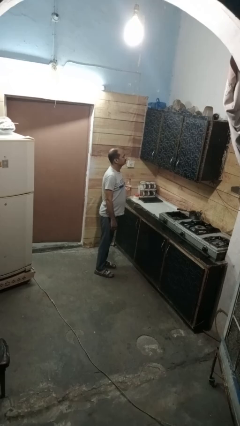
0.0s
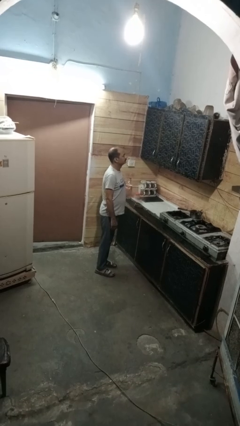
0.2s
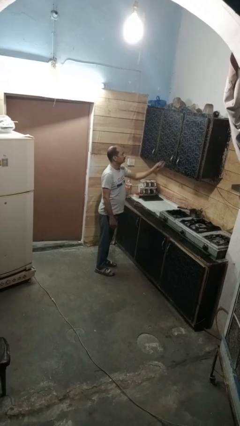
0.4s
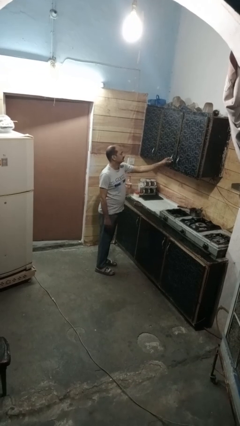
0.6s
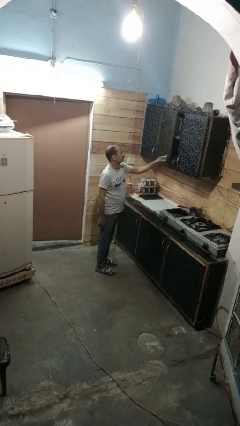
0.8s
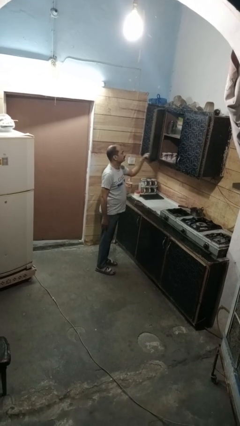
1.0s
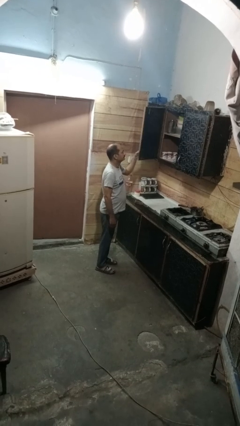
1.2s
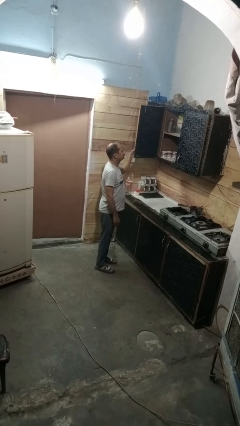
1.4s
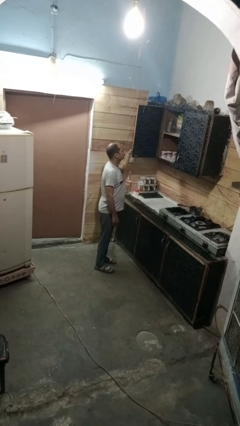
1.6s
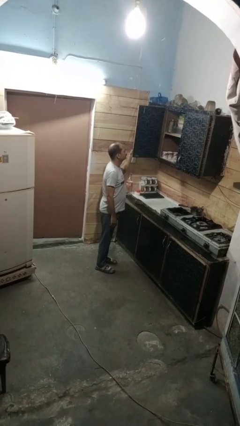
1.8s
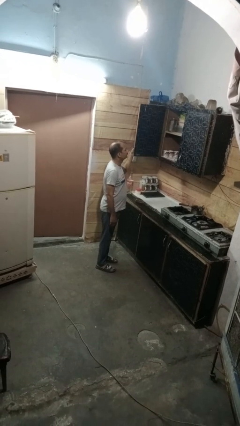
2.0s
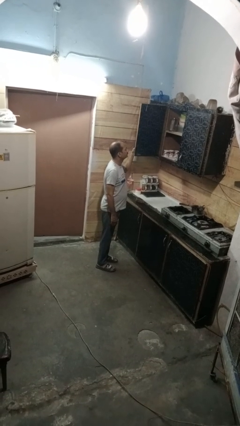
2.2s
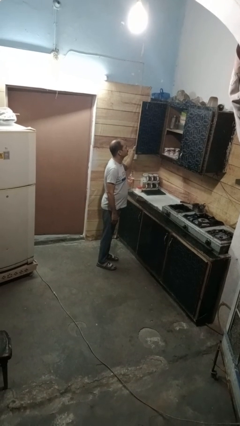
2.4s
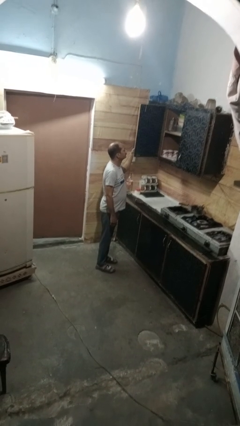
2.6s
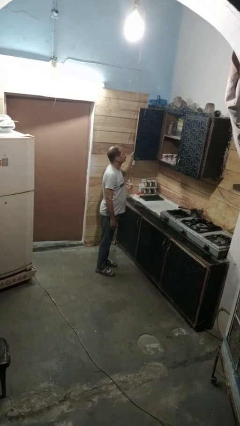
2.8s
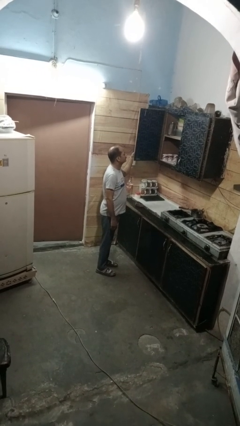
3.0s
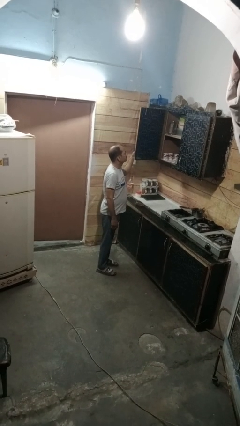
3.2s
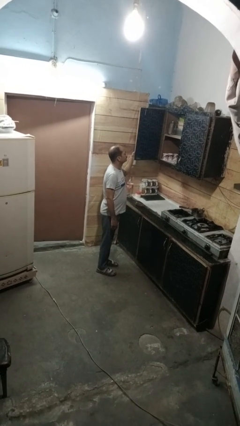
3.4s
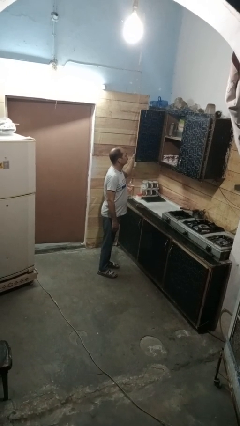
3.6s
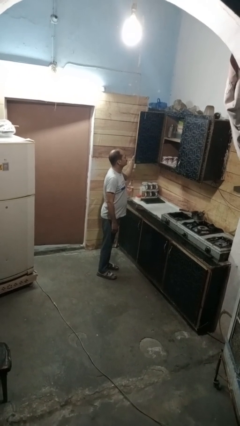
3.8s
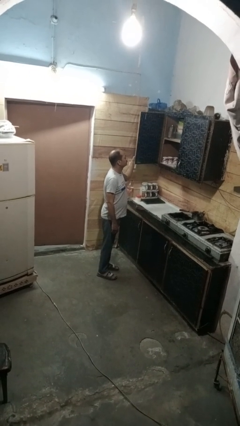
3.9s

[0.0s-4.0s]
person opens cabinet

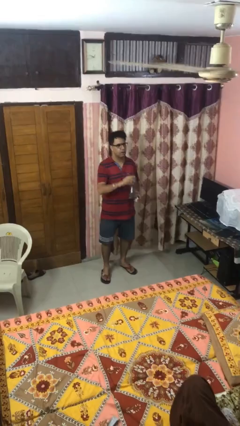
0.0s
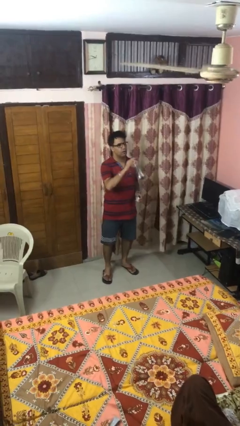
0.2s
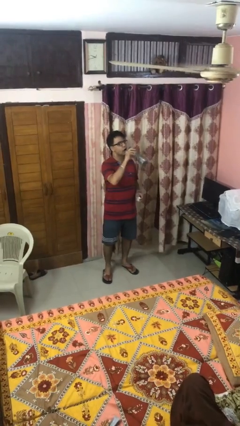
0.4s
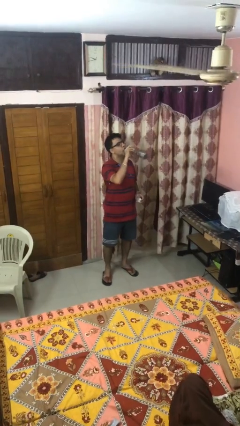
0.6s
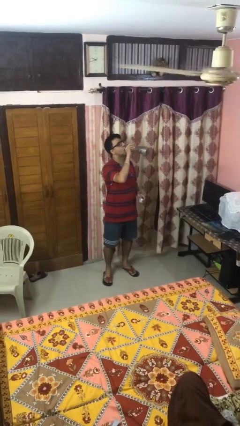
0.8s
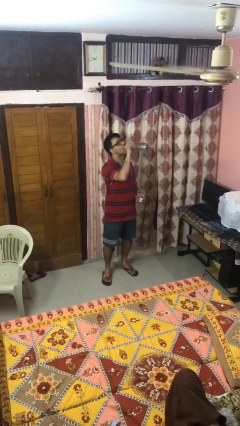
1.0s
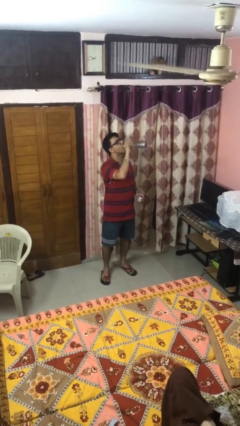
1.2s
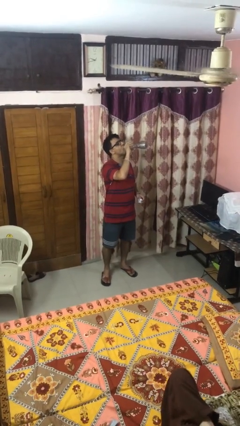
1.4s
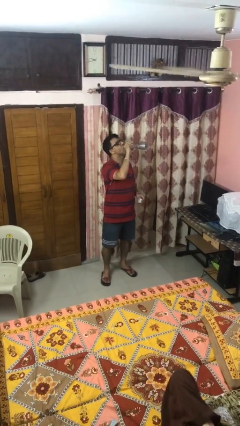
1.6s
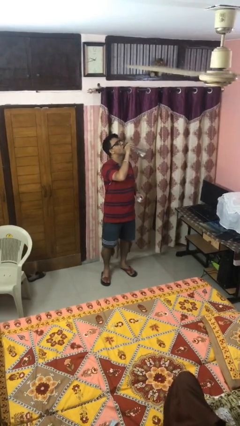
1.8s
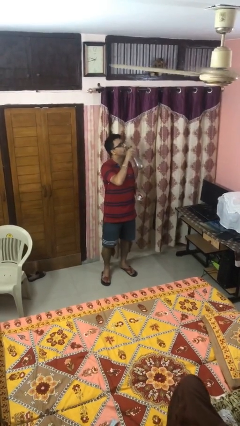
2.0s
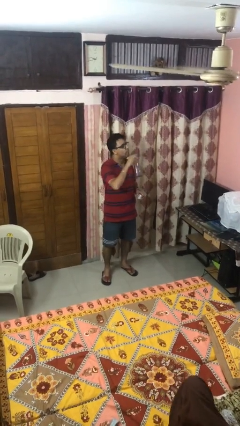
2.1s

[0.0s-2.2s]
person drinks from bottle

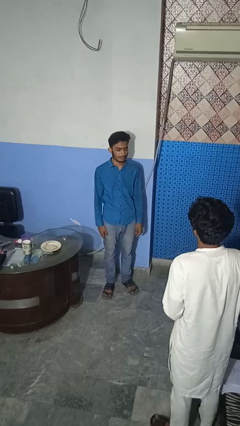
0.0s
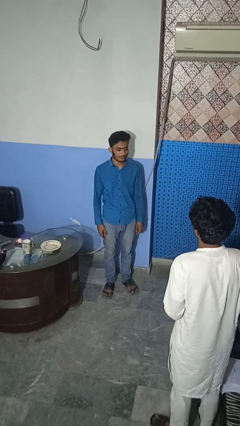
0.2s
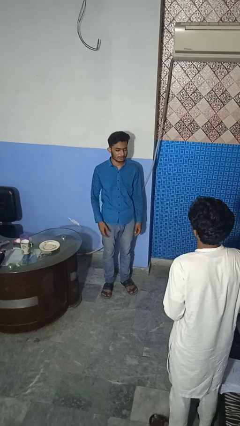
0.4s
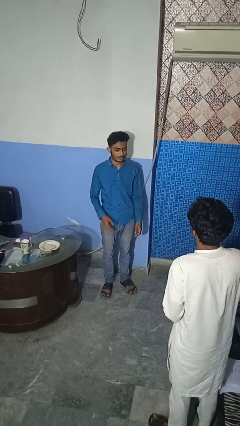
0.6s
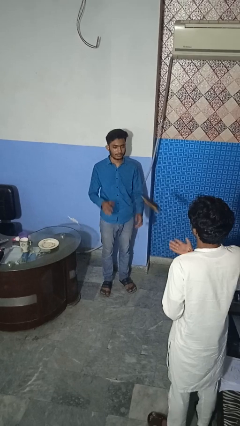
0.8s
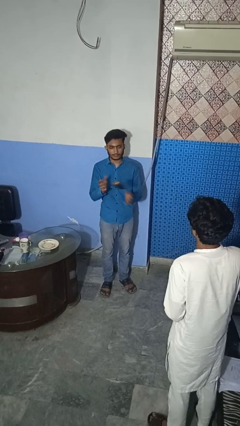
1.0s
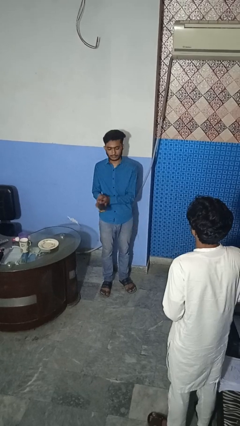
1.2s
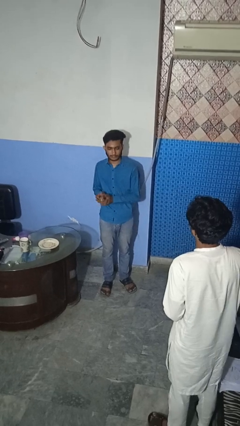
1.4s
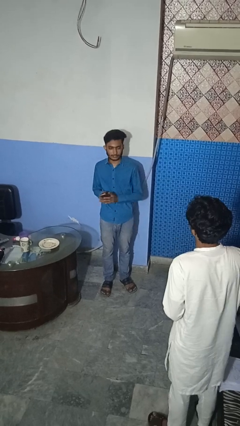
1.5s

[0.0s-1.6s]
person catches object from person

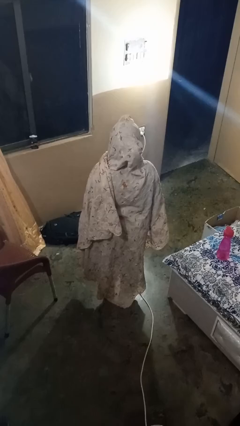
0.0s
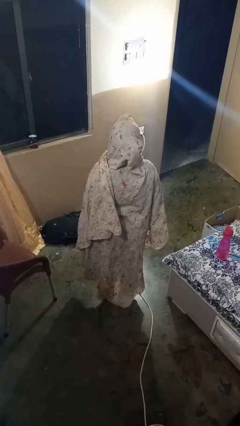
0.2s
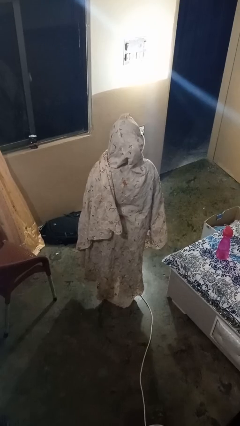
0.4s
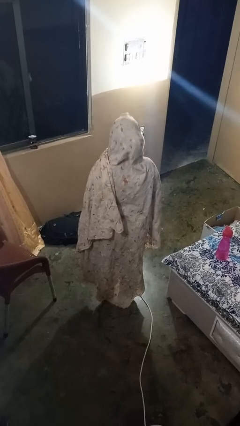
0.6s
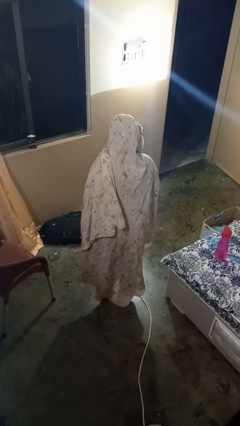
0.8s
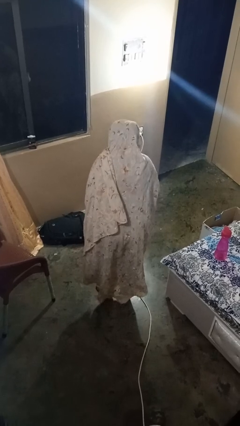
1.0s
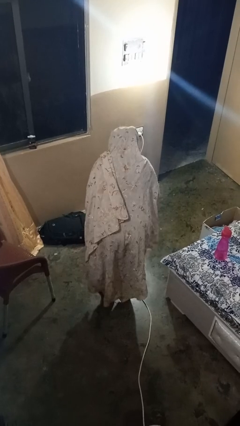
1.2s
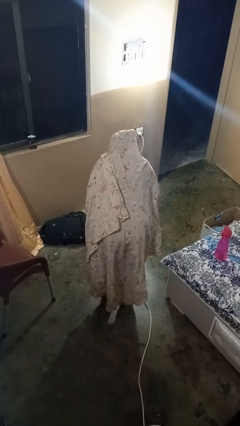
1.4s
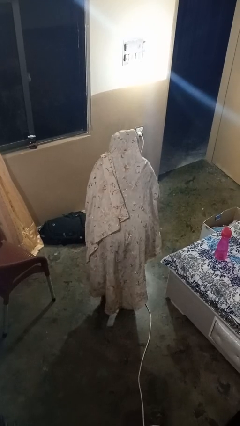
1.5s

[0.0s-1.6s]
person bows

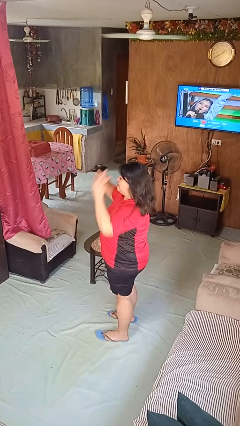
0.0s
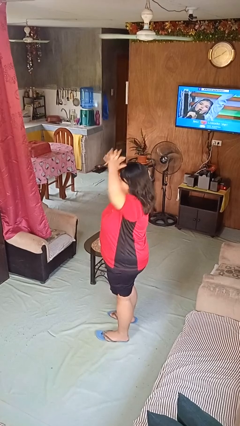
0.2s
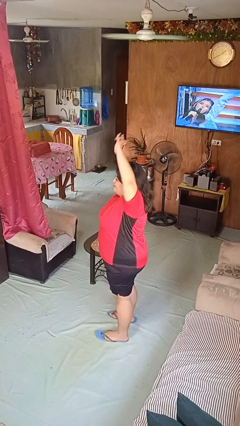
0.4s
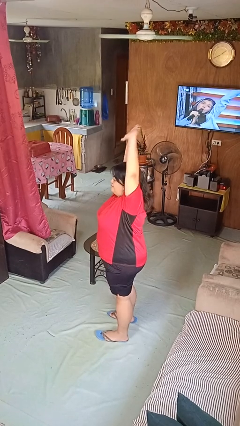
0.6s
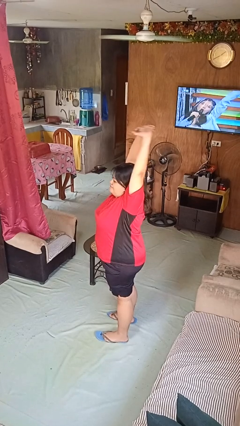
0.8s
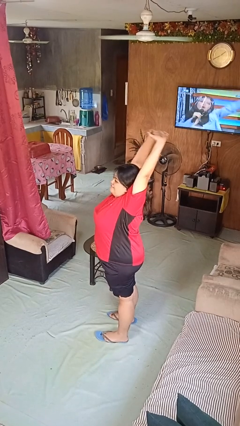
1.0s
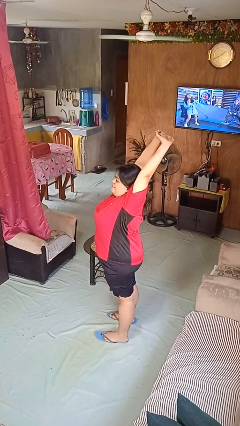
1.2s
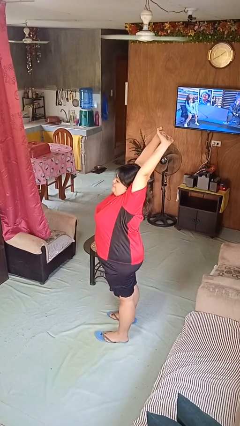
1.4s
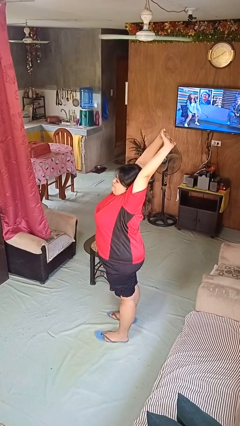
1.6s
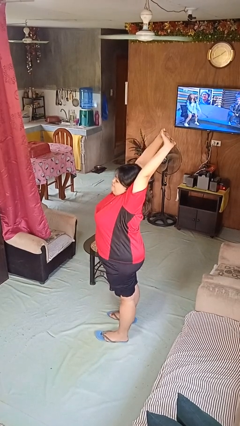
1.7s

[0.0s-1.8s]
person stretches arms over head

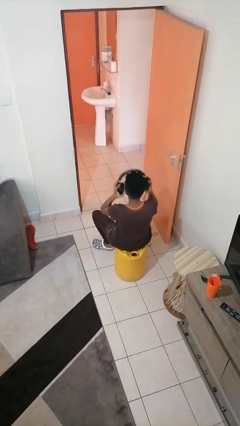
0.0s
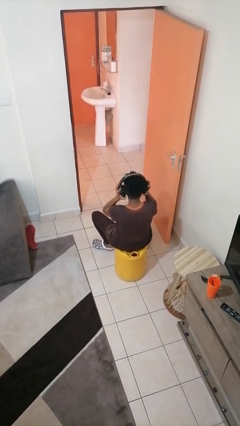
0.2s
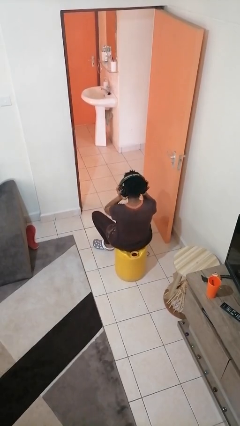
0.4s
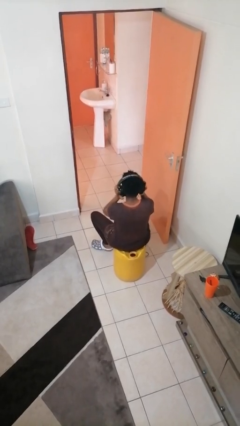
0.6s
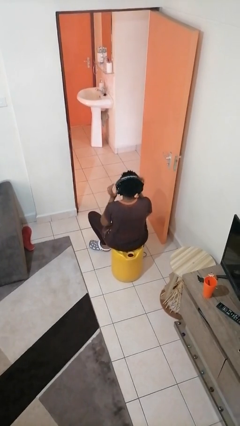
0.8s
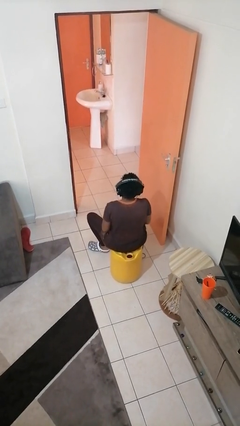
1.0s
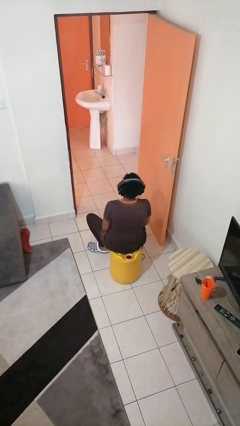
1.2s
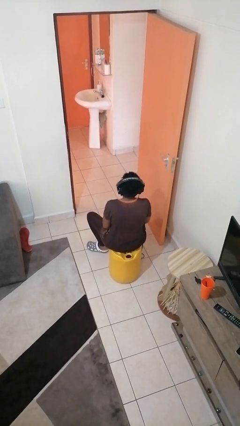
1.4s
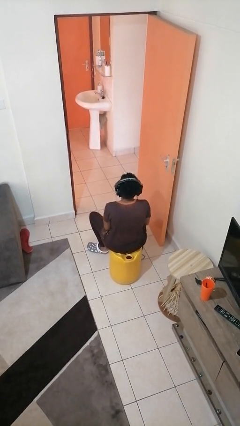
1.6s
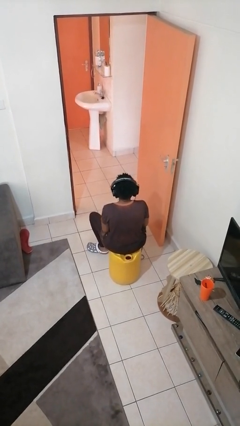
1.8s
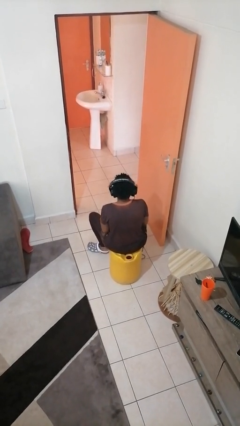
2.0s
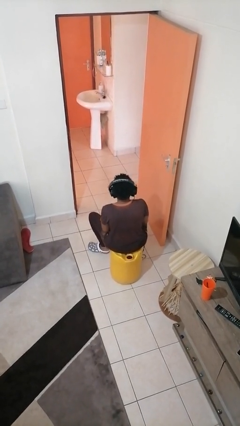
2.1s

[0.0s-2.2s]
person puts on headphones

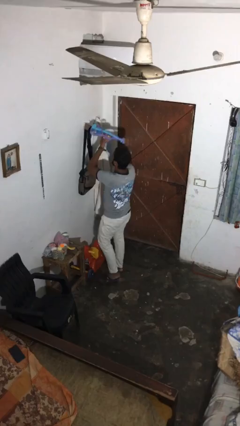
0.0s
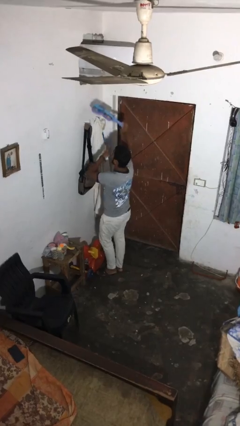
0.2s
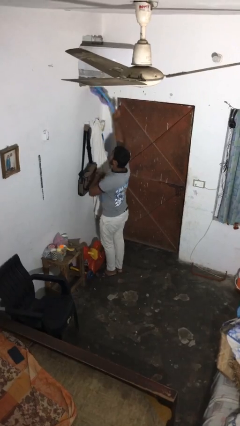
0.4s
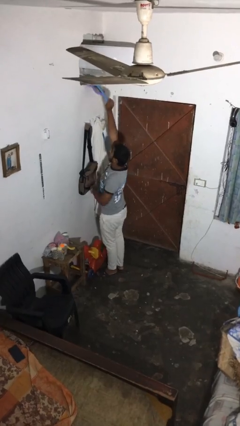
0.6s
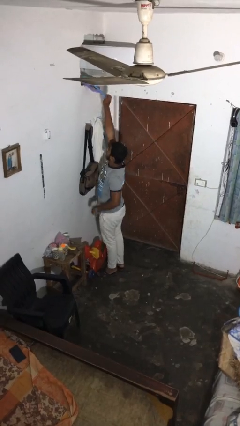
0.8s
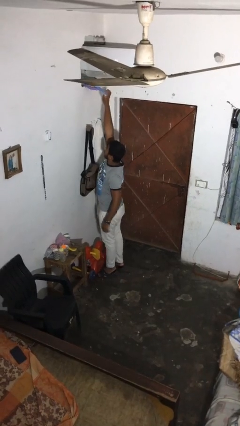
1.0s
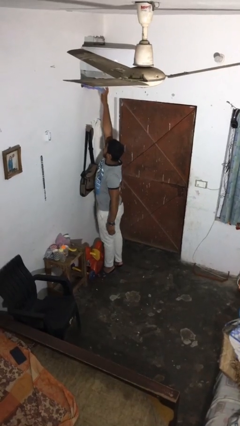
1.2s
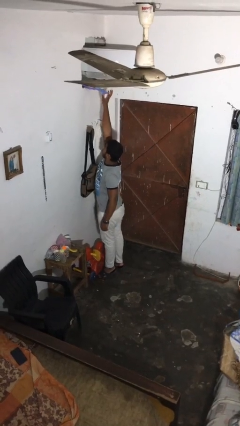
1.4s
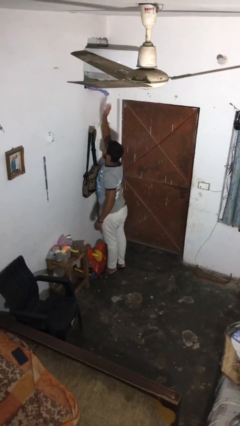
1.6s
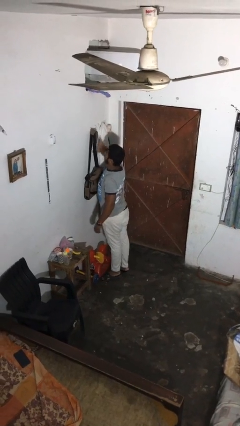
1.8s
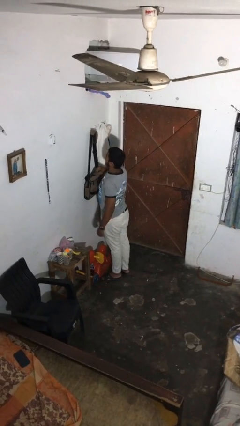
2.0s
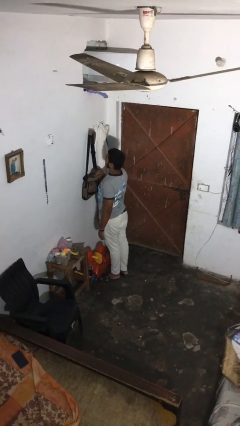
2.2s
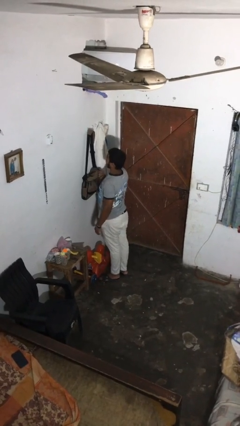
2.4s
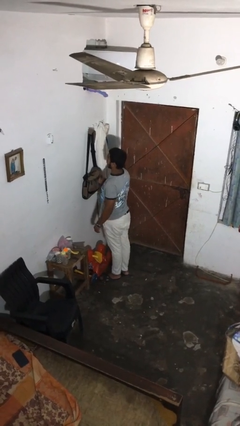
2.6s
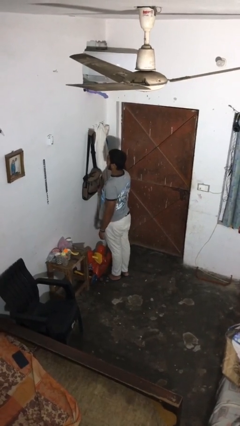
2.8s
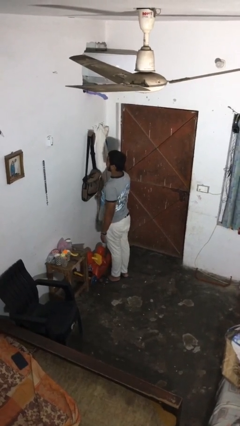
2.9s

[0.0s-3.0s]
person puts down object on shelf

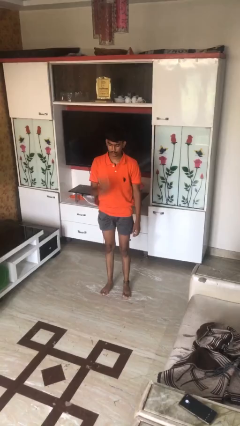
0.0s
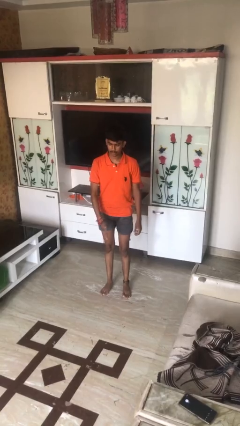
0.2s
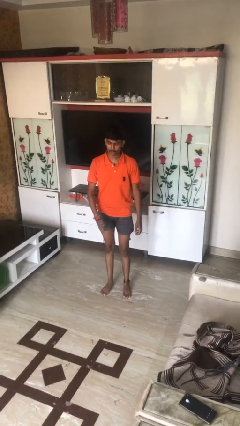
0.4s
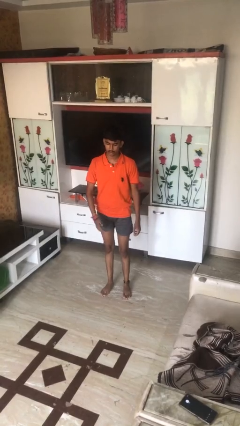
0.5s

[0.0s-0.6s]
person karate chop
